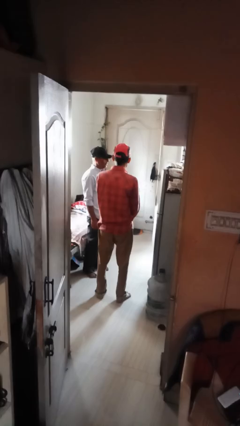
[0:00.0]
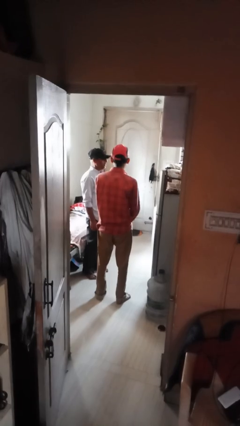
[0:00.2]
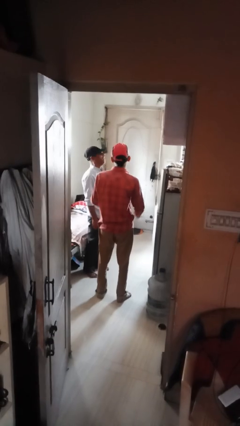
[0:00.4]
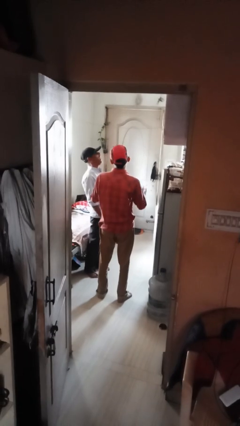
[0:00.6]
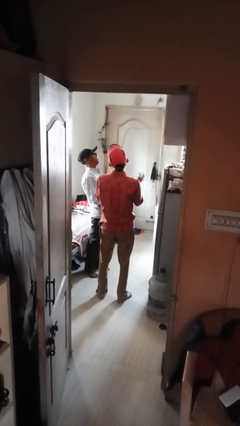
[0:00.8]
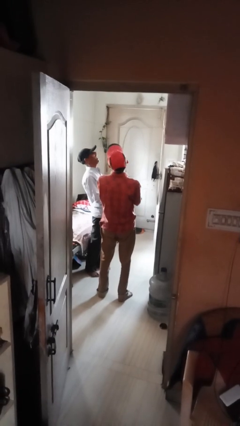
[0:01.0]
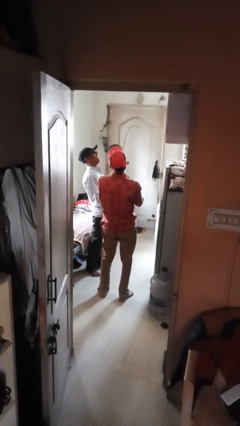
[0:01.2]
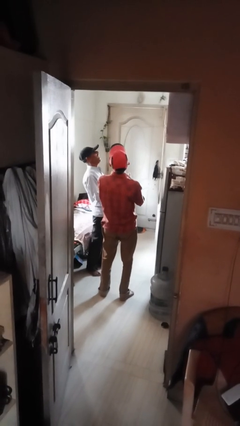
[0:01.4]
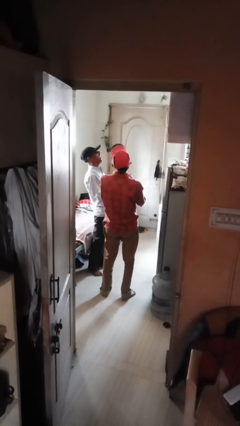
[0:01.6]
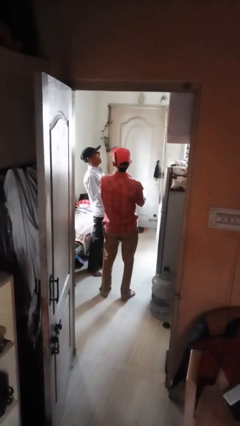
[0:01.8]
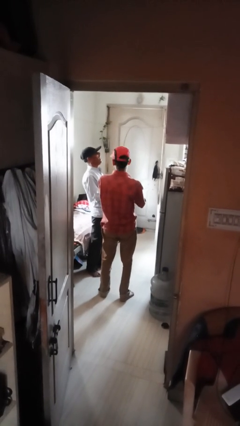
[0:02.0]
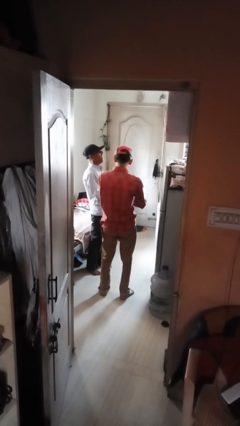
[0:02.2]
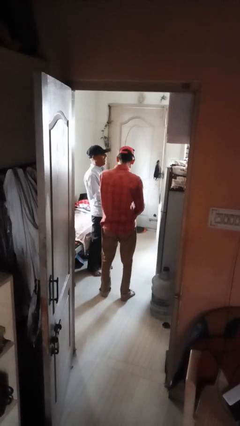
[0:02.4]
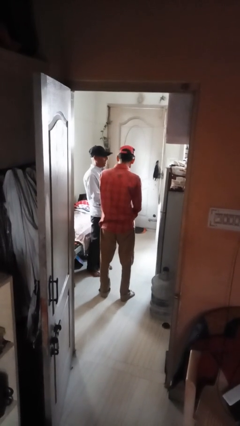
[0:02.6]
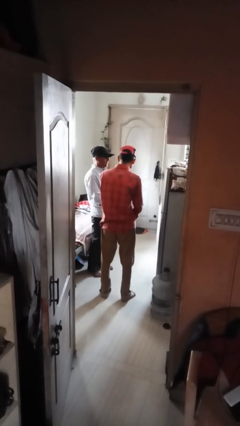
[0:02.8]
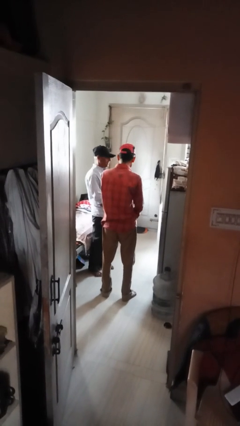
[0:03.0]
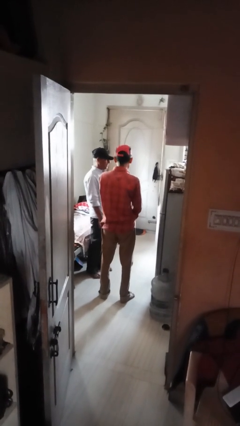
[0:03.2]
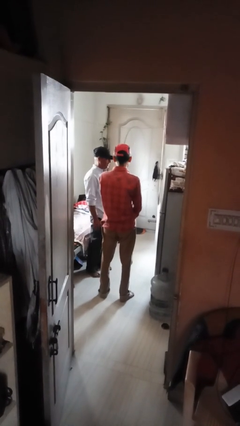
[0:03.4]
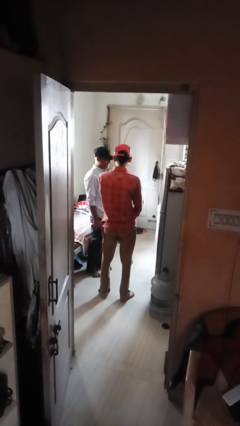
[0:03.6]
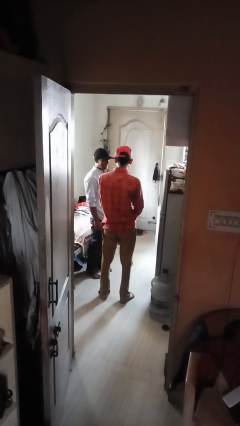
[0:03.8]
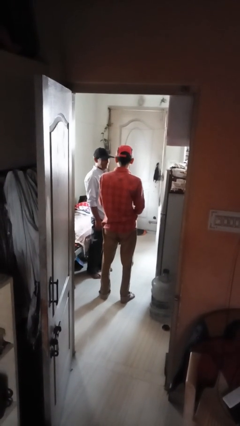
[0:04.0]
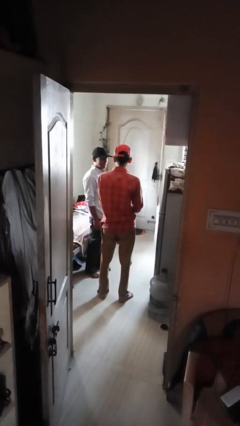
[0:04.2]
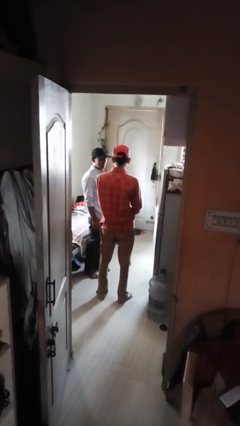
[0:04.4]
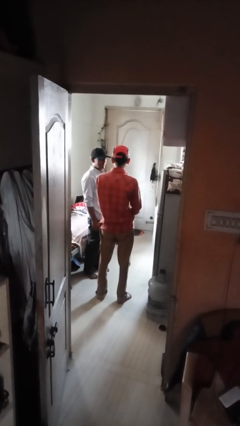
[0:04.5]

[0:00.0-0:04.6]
person laughs with person

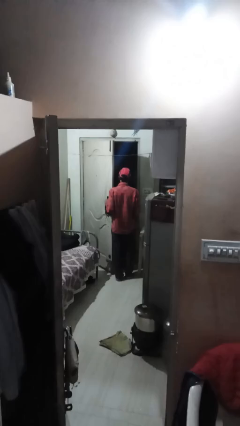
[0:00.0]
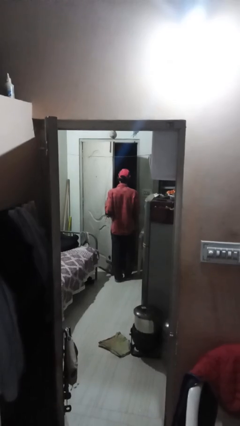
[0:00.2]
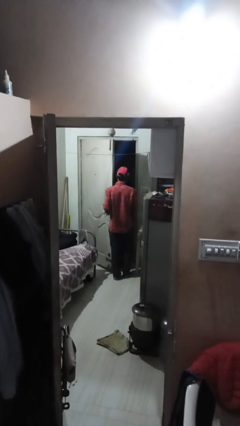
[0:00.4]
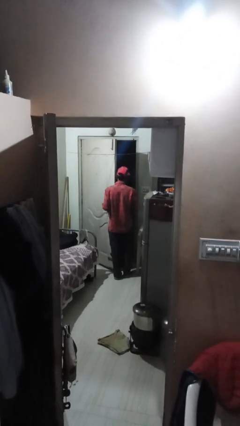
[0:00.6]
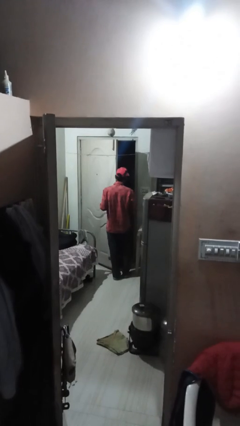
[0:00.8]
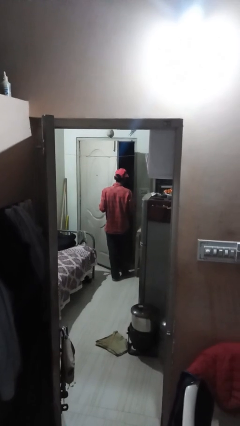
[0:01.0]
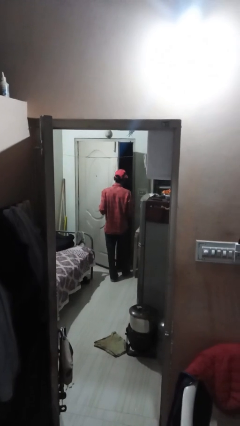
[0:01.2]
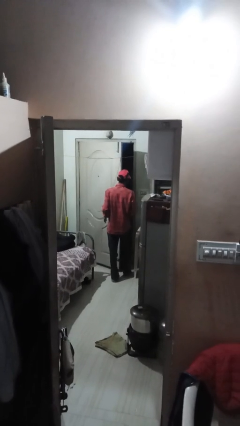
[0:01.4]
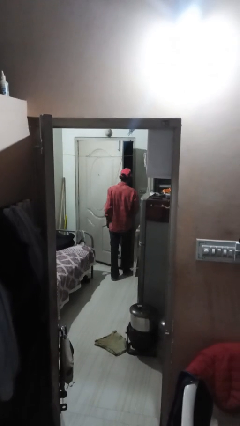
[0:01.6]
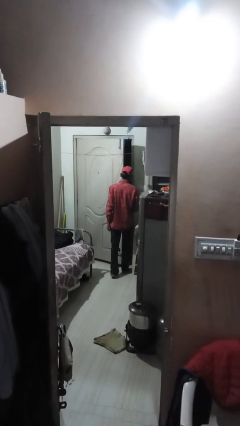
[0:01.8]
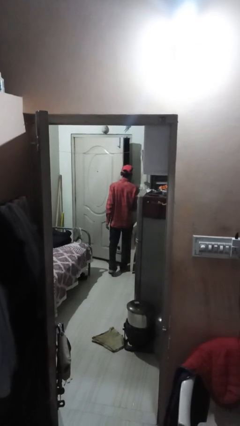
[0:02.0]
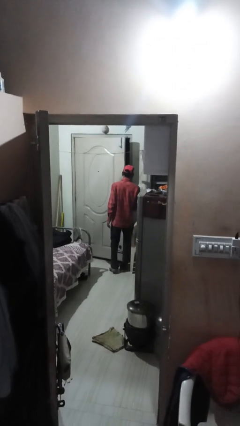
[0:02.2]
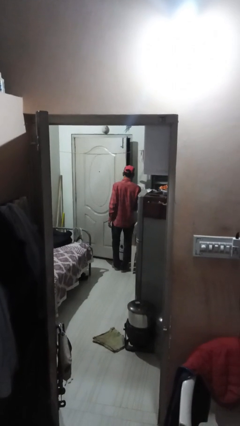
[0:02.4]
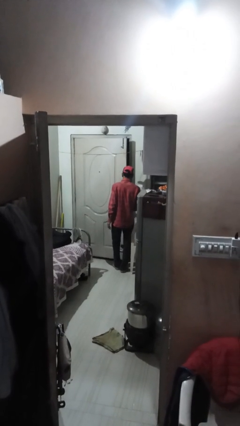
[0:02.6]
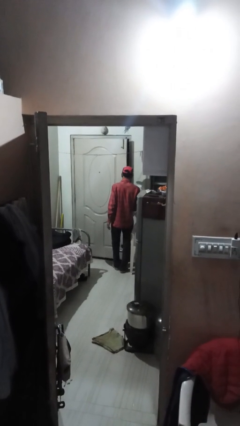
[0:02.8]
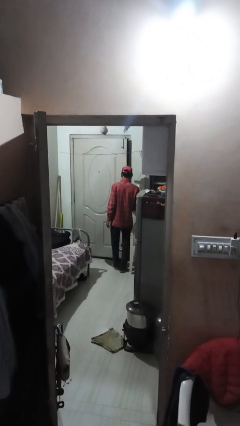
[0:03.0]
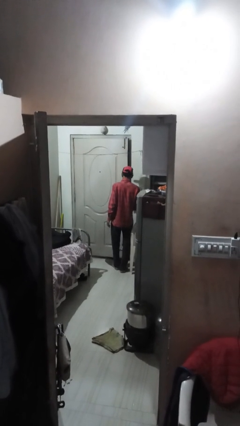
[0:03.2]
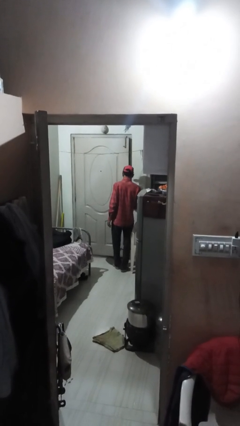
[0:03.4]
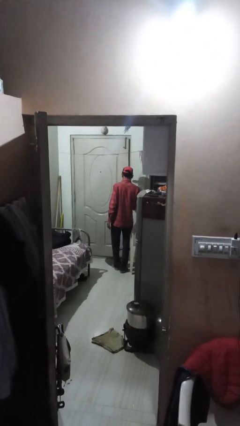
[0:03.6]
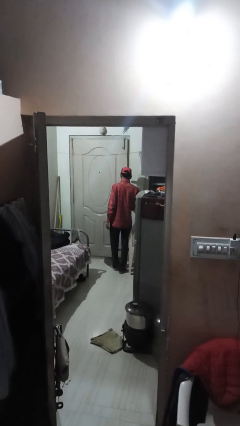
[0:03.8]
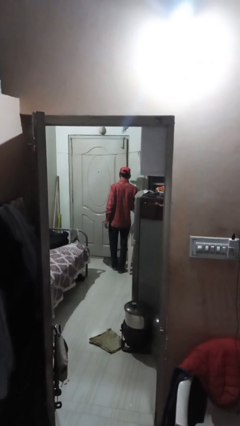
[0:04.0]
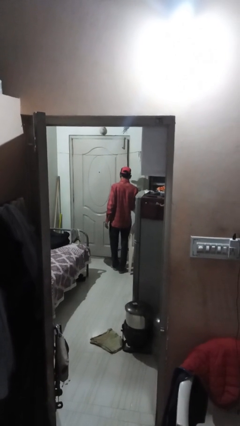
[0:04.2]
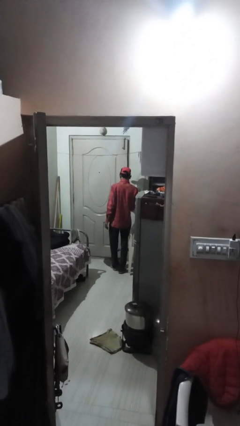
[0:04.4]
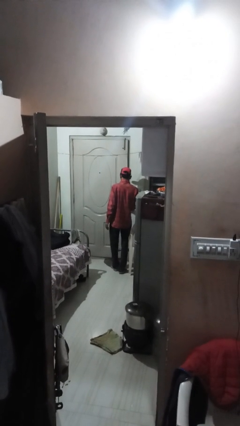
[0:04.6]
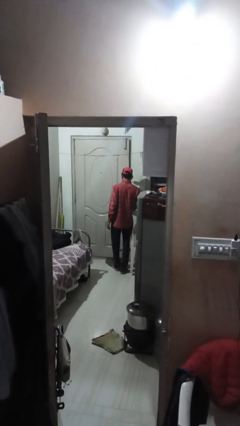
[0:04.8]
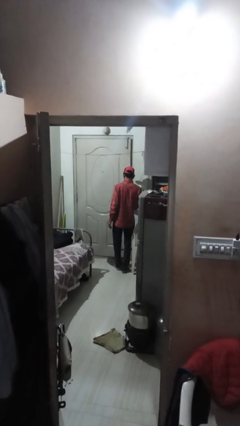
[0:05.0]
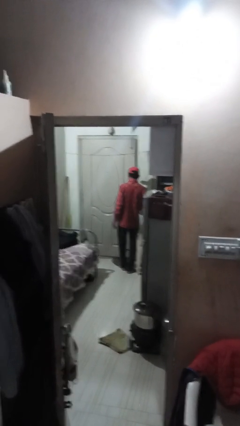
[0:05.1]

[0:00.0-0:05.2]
person closes facility door

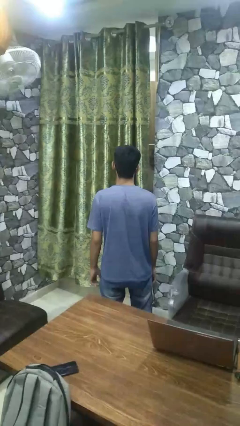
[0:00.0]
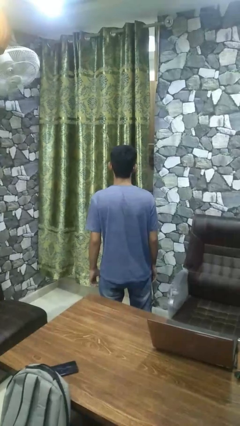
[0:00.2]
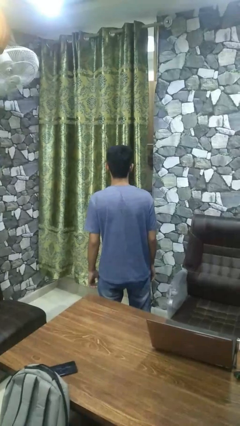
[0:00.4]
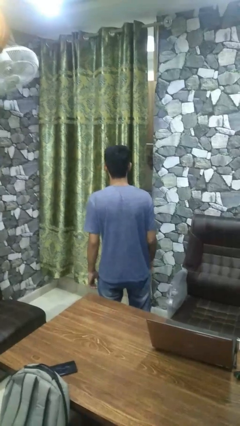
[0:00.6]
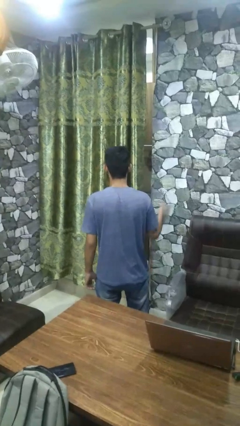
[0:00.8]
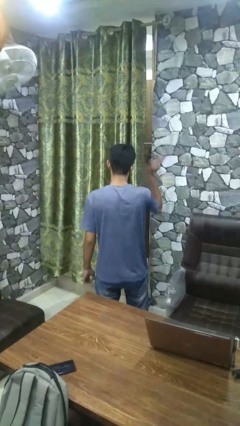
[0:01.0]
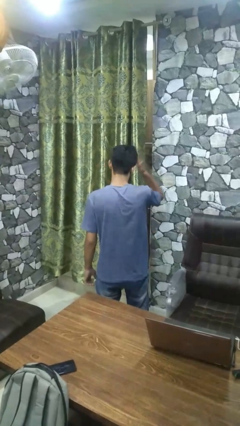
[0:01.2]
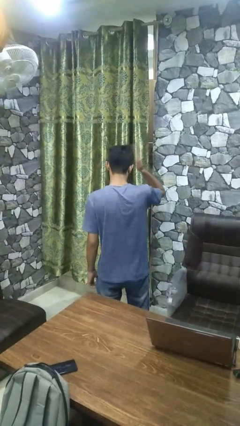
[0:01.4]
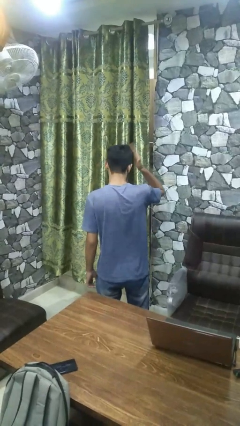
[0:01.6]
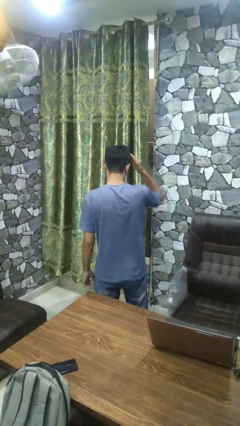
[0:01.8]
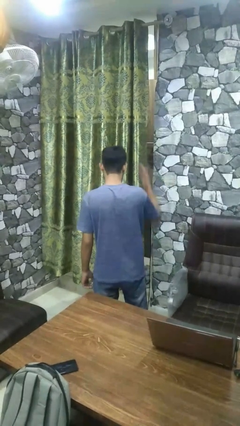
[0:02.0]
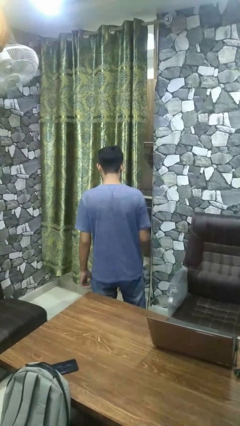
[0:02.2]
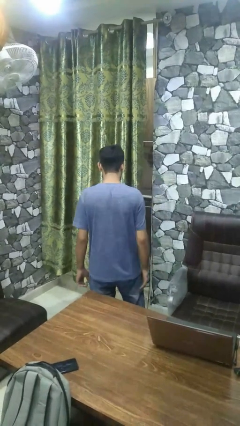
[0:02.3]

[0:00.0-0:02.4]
person pats head

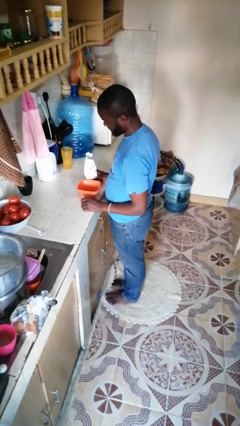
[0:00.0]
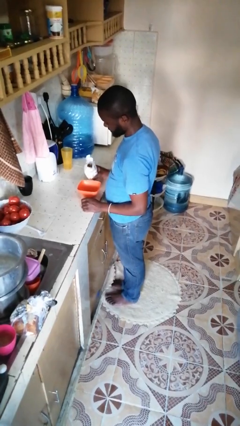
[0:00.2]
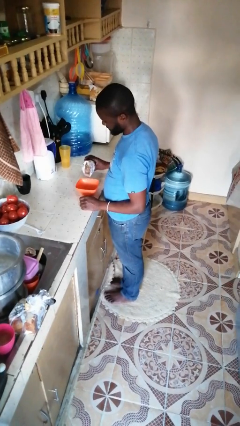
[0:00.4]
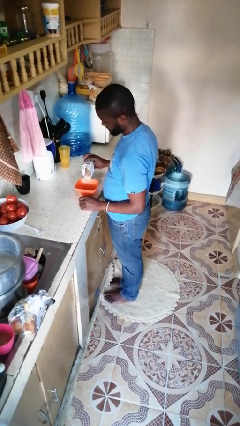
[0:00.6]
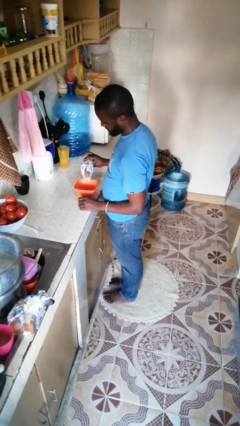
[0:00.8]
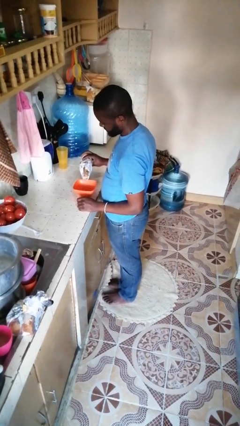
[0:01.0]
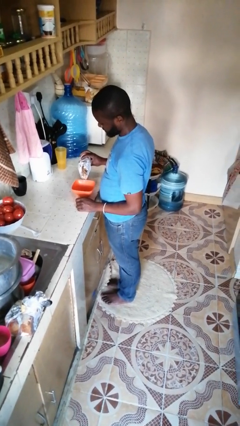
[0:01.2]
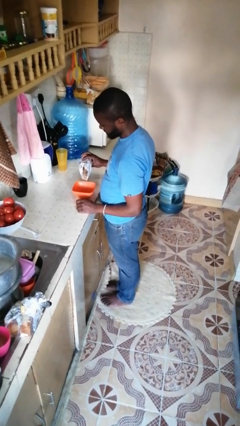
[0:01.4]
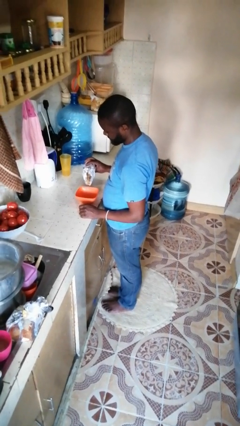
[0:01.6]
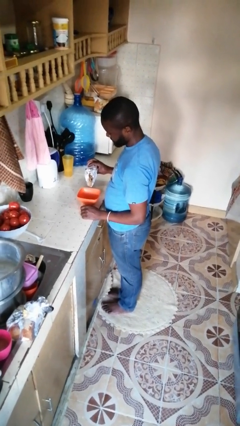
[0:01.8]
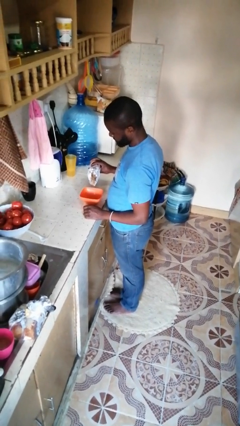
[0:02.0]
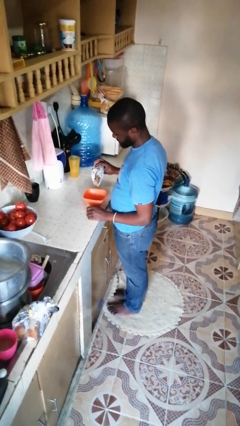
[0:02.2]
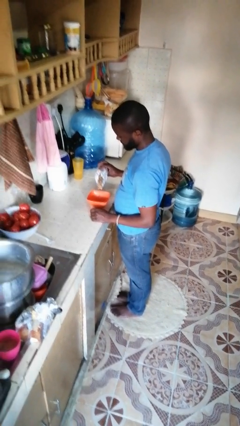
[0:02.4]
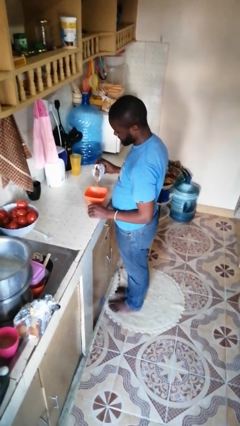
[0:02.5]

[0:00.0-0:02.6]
person pours into bowl

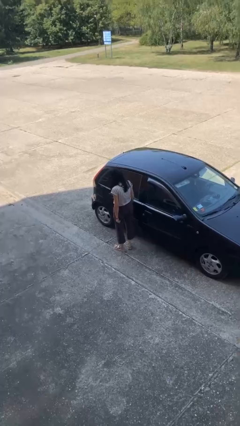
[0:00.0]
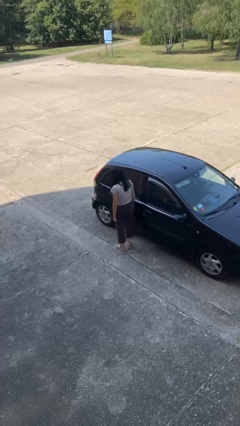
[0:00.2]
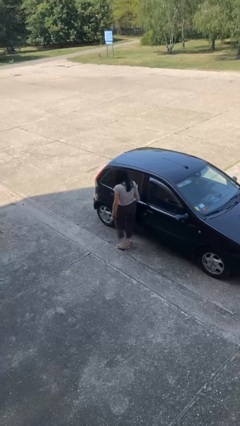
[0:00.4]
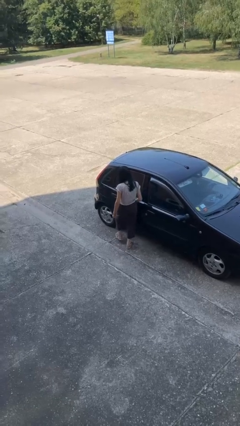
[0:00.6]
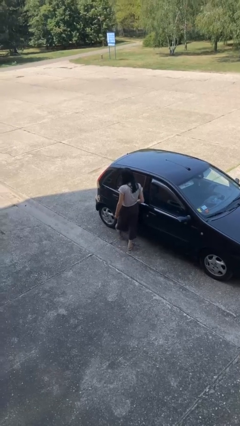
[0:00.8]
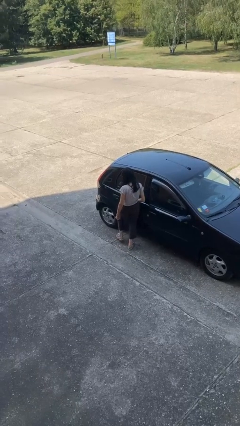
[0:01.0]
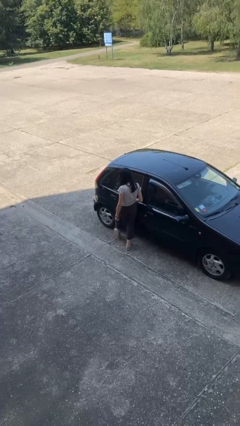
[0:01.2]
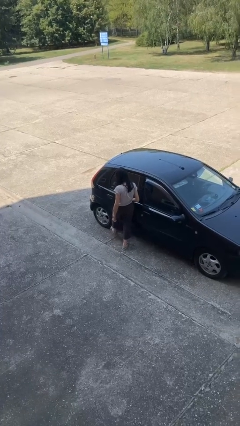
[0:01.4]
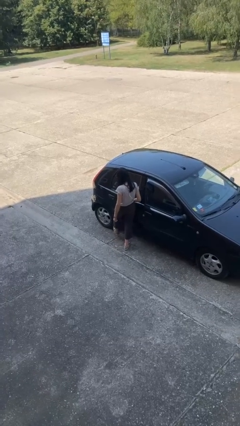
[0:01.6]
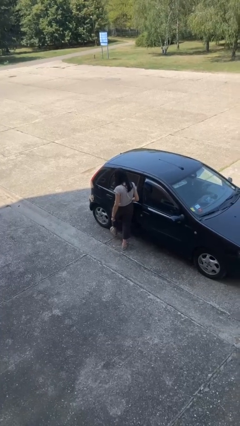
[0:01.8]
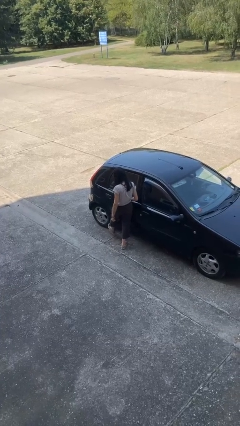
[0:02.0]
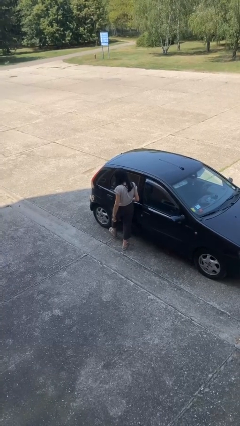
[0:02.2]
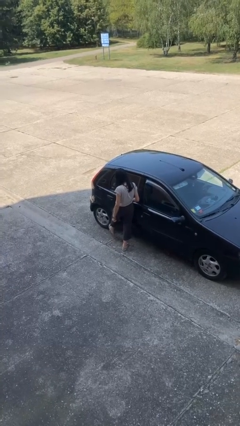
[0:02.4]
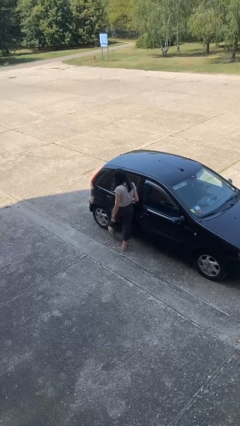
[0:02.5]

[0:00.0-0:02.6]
person kicks car tires

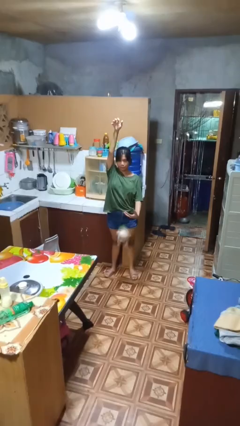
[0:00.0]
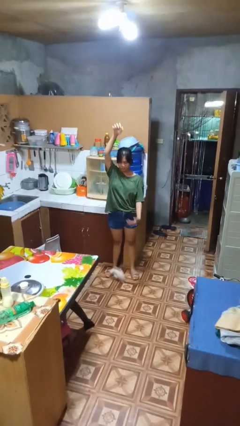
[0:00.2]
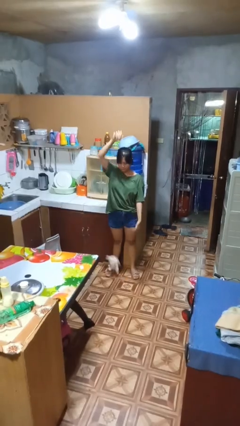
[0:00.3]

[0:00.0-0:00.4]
person catches dropped object
